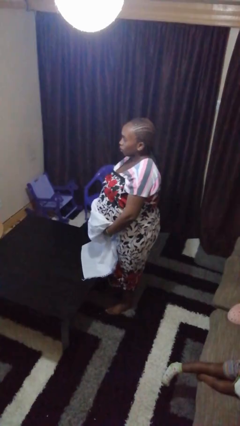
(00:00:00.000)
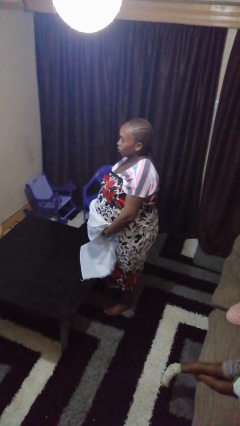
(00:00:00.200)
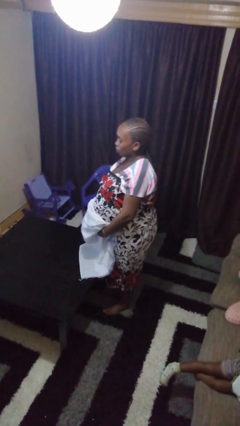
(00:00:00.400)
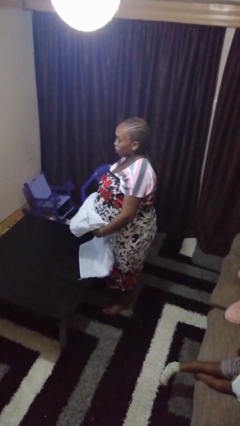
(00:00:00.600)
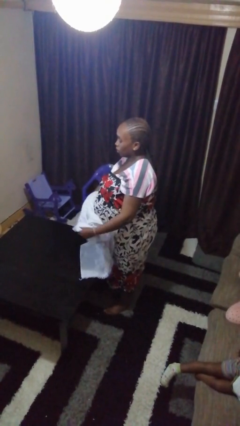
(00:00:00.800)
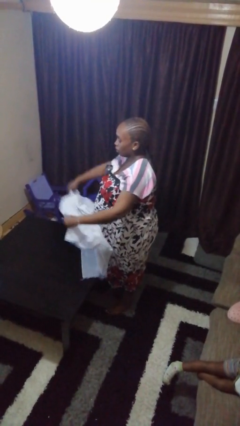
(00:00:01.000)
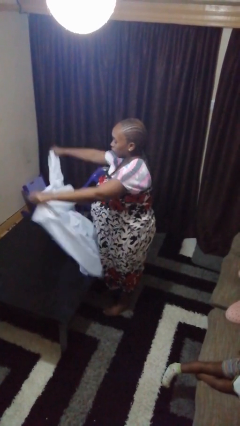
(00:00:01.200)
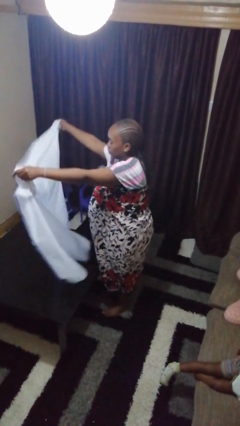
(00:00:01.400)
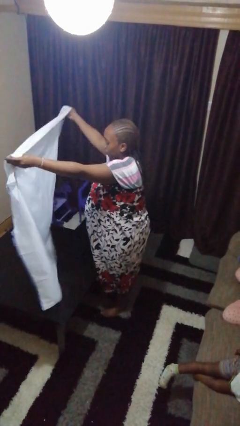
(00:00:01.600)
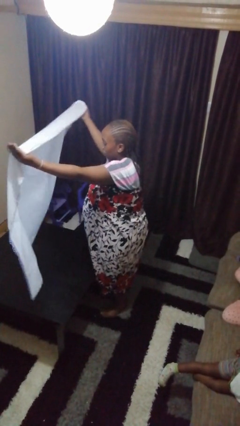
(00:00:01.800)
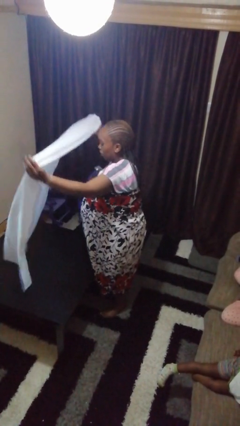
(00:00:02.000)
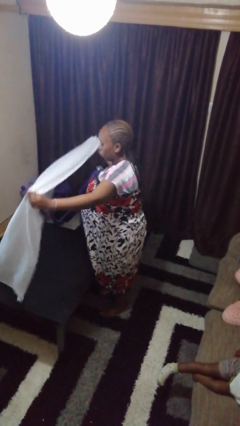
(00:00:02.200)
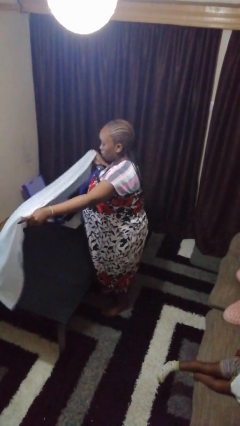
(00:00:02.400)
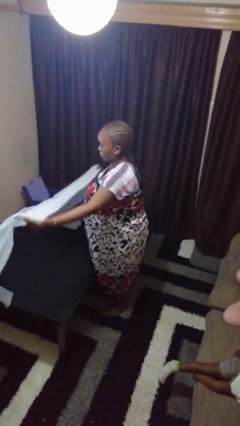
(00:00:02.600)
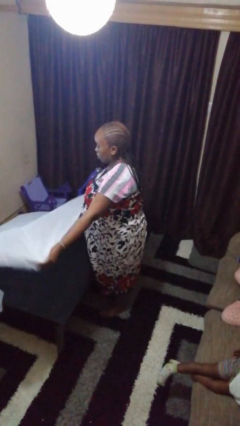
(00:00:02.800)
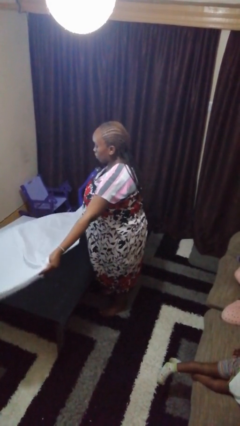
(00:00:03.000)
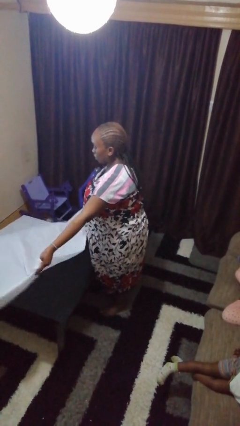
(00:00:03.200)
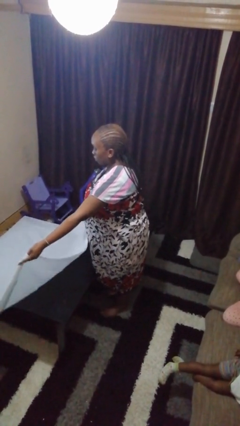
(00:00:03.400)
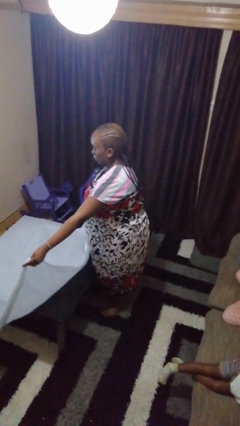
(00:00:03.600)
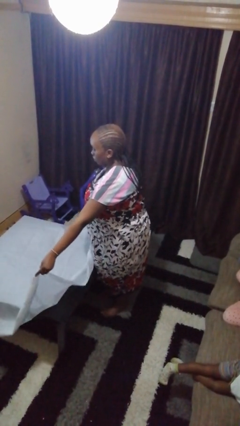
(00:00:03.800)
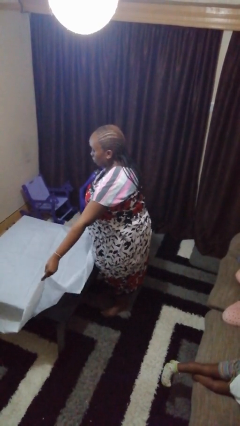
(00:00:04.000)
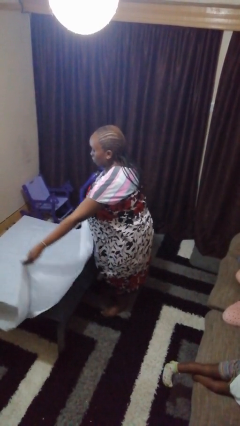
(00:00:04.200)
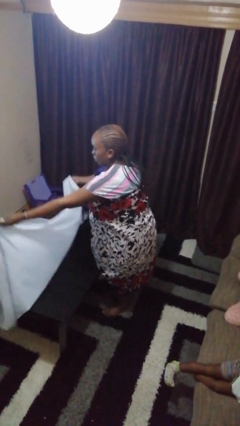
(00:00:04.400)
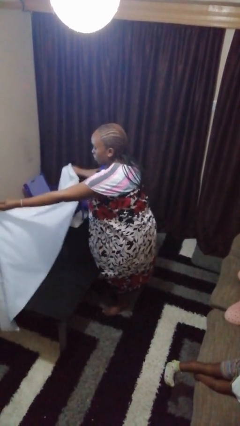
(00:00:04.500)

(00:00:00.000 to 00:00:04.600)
person spreads tablecloth

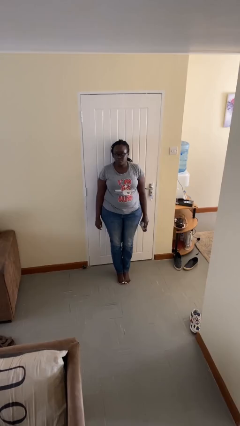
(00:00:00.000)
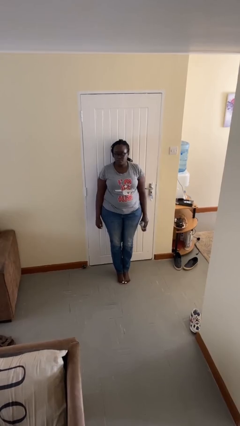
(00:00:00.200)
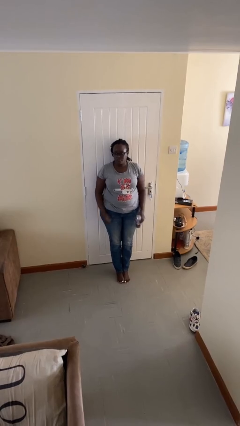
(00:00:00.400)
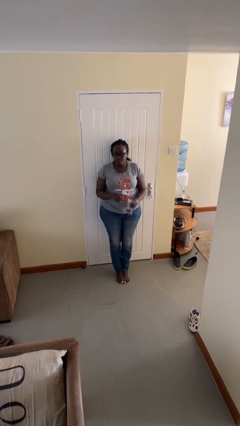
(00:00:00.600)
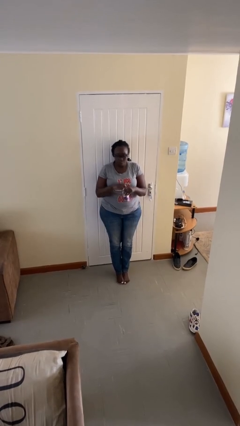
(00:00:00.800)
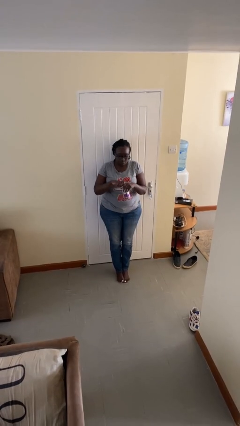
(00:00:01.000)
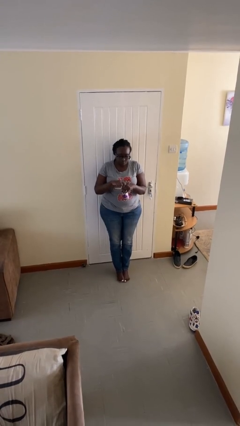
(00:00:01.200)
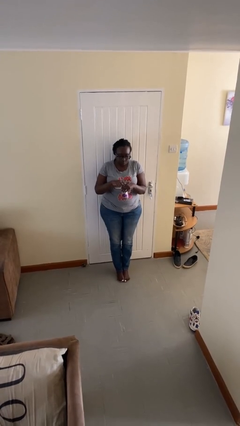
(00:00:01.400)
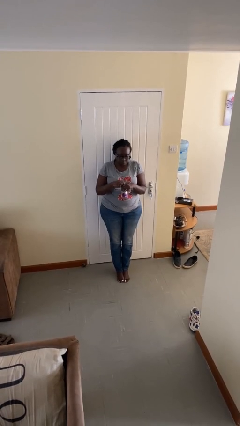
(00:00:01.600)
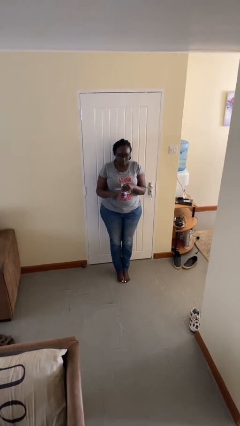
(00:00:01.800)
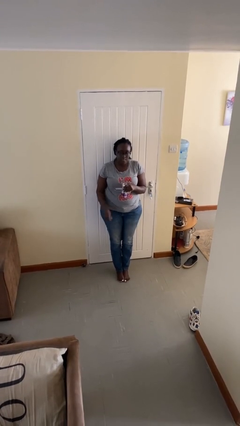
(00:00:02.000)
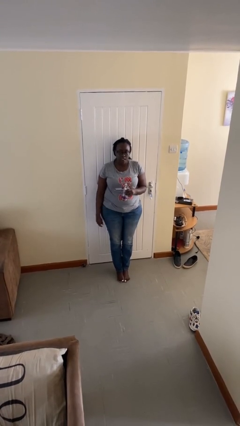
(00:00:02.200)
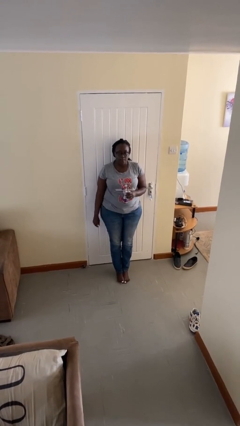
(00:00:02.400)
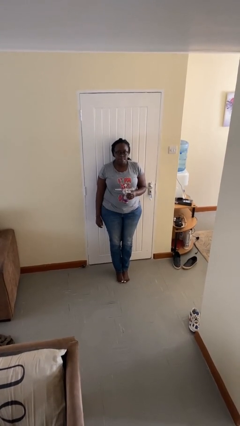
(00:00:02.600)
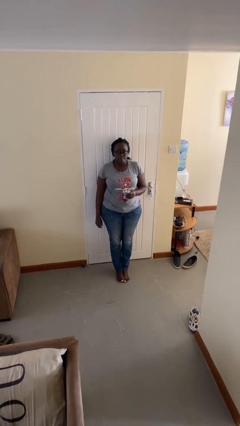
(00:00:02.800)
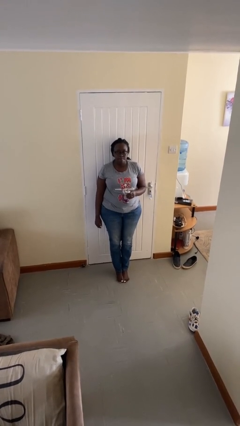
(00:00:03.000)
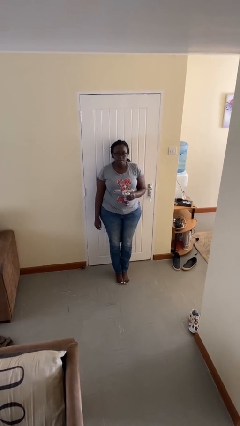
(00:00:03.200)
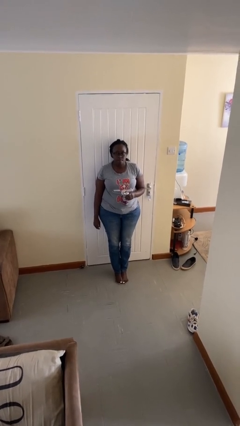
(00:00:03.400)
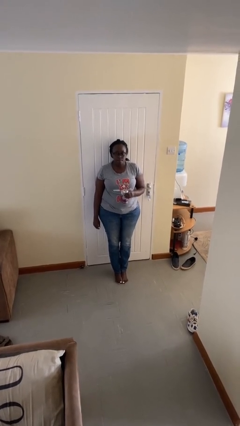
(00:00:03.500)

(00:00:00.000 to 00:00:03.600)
person opens beverage can

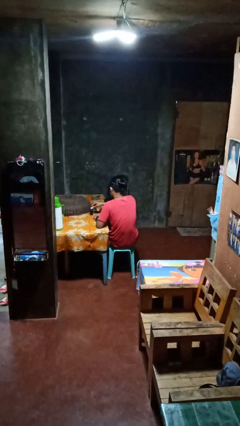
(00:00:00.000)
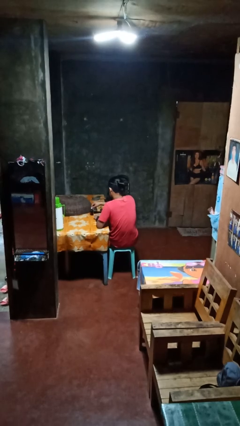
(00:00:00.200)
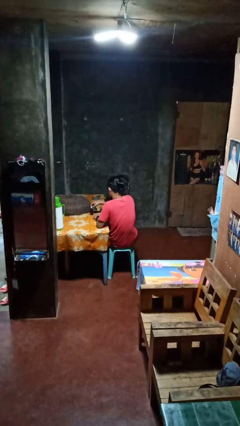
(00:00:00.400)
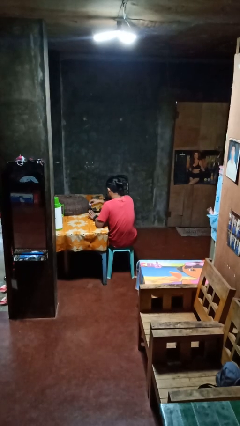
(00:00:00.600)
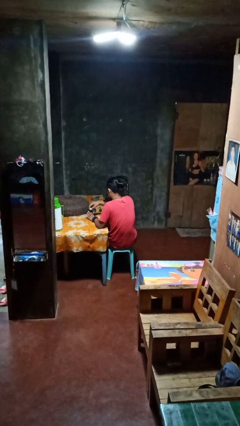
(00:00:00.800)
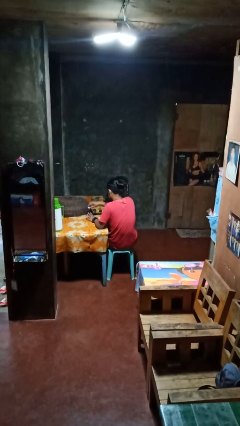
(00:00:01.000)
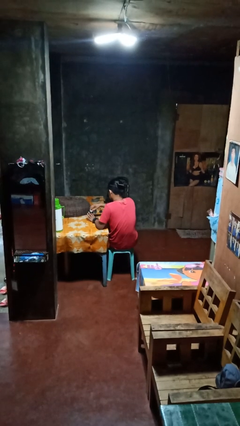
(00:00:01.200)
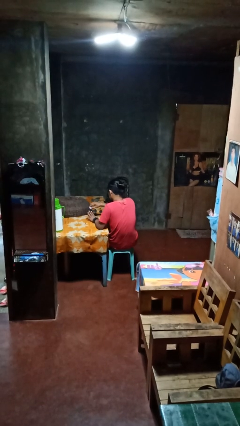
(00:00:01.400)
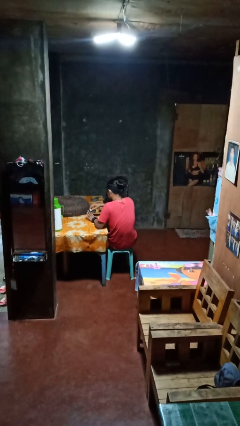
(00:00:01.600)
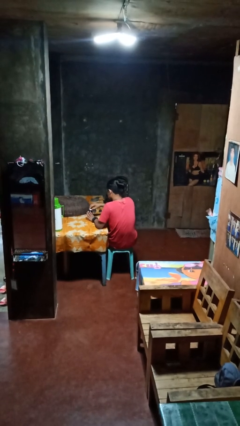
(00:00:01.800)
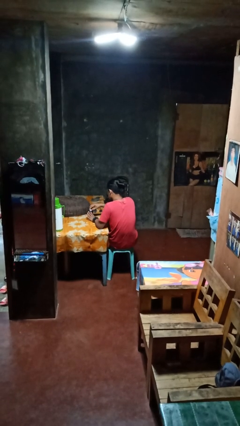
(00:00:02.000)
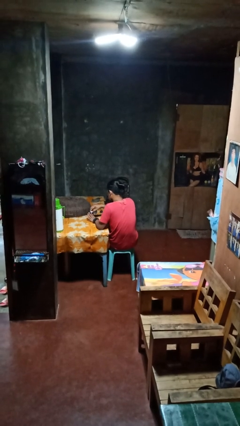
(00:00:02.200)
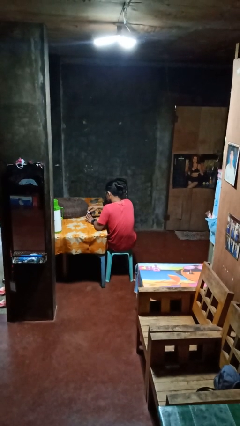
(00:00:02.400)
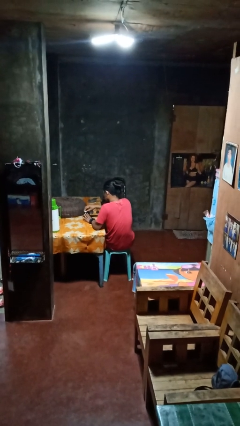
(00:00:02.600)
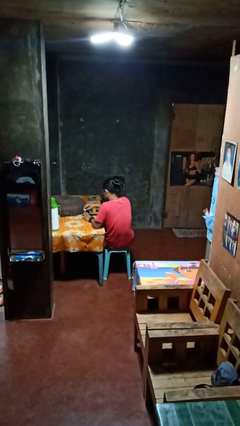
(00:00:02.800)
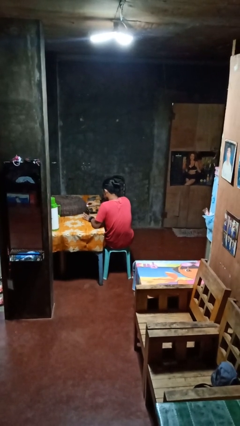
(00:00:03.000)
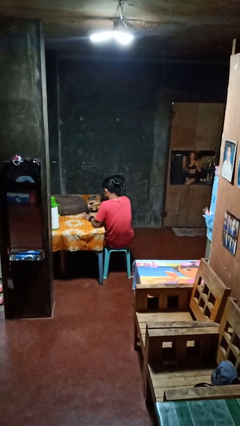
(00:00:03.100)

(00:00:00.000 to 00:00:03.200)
person paints fingernails

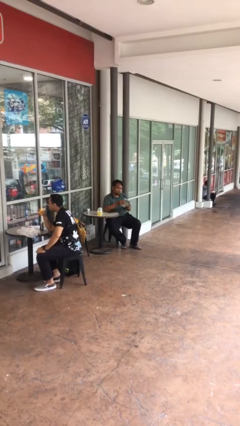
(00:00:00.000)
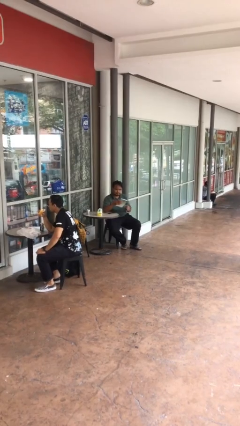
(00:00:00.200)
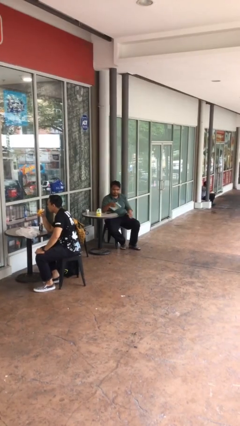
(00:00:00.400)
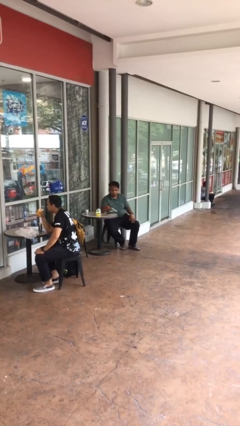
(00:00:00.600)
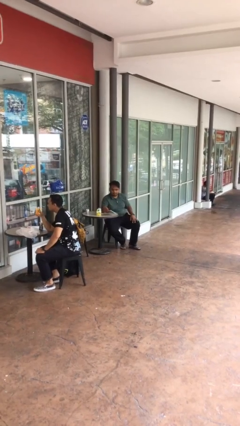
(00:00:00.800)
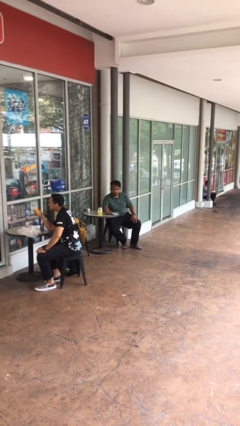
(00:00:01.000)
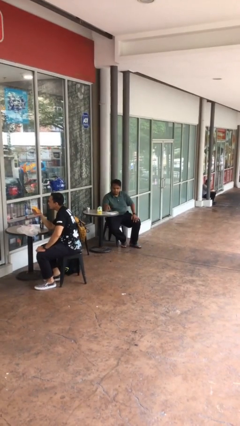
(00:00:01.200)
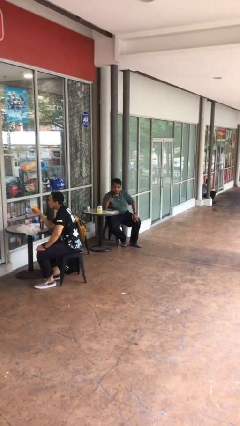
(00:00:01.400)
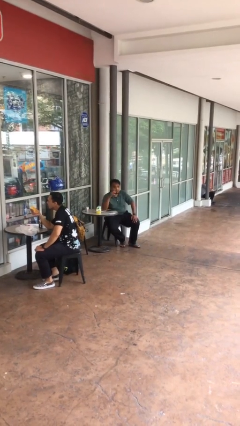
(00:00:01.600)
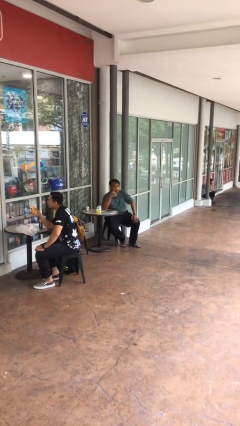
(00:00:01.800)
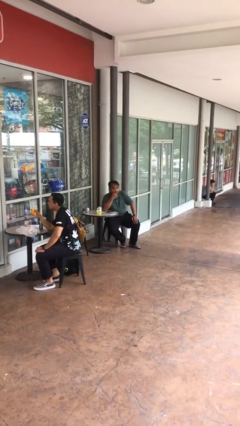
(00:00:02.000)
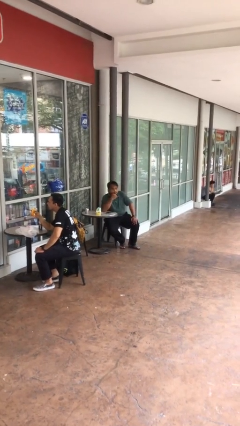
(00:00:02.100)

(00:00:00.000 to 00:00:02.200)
person puts down object on table

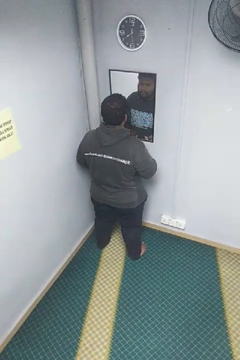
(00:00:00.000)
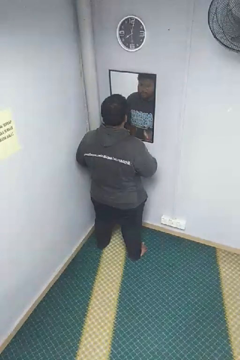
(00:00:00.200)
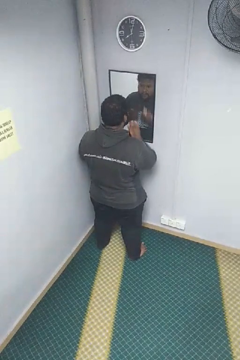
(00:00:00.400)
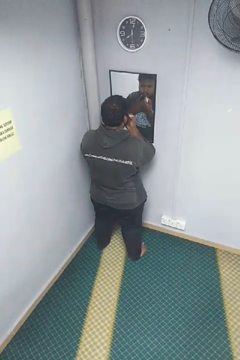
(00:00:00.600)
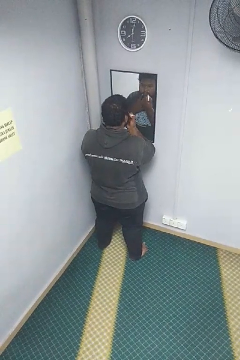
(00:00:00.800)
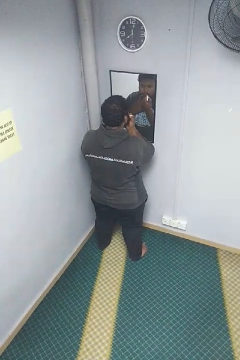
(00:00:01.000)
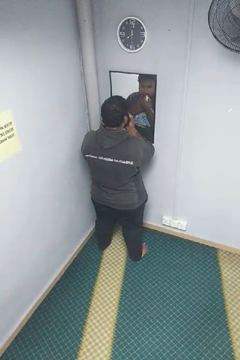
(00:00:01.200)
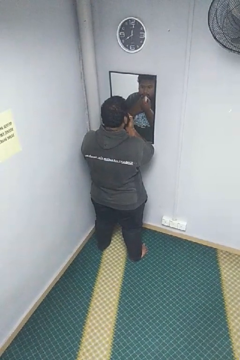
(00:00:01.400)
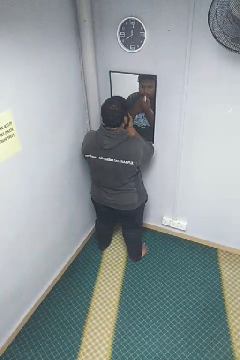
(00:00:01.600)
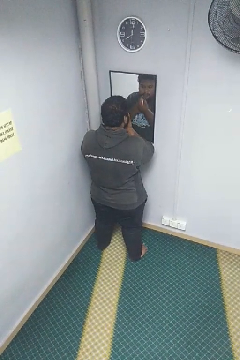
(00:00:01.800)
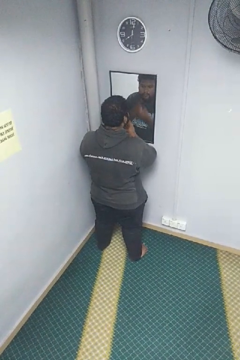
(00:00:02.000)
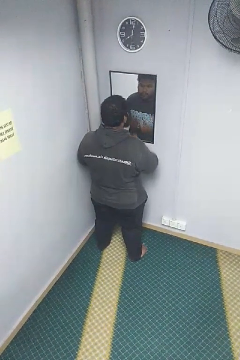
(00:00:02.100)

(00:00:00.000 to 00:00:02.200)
person applies lip makeup

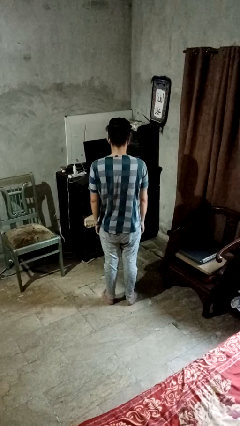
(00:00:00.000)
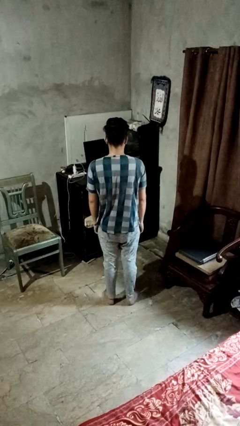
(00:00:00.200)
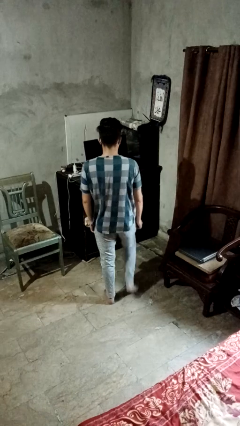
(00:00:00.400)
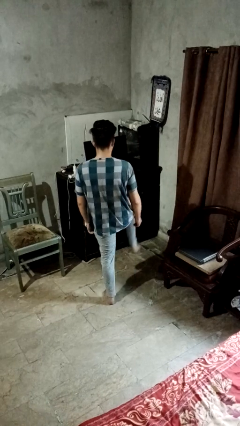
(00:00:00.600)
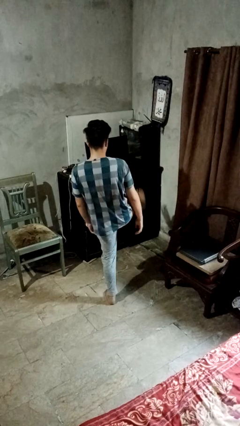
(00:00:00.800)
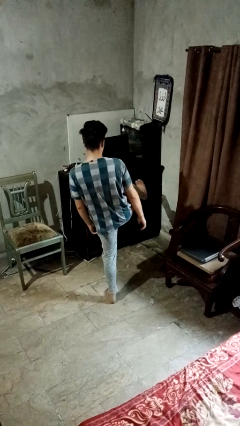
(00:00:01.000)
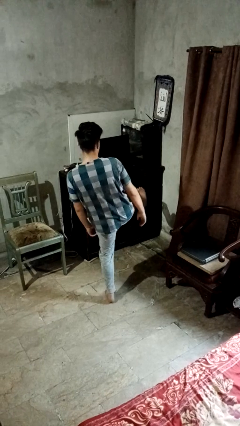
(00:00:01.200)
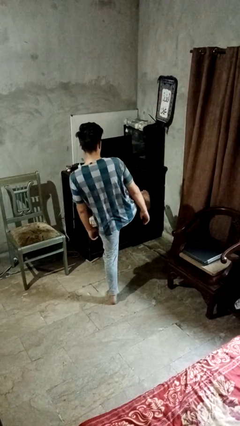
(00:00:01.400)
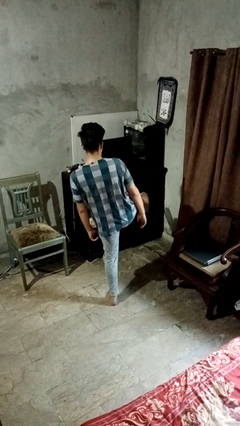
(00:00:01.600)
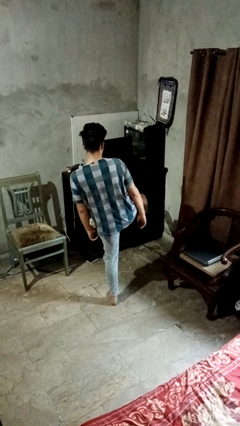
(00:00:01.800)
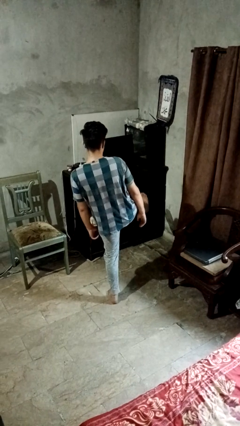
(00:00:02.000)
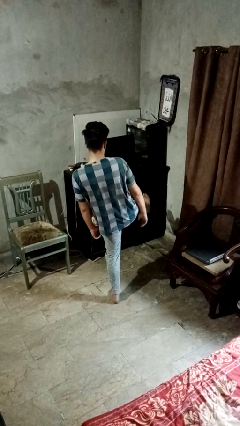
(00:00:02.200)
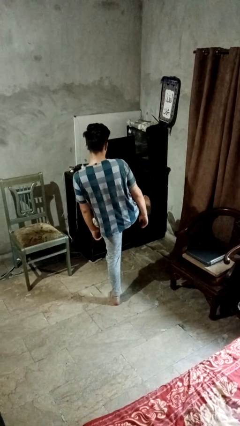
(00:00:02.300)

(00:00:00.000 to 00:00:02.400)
person karate kicks
